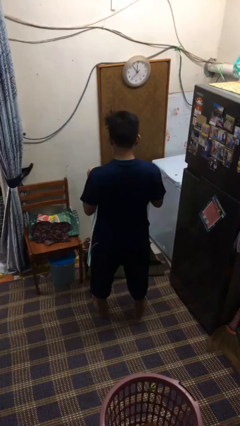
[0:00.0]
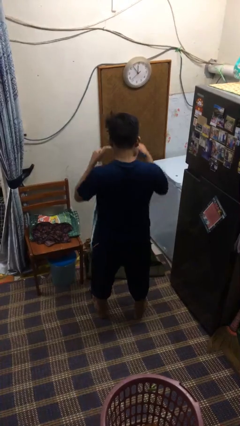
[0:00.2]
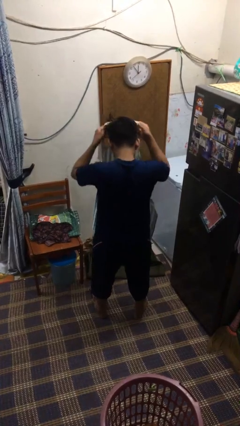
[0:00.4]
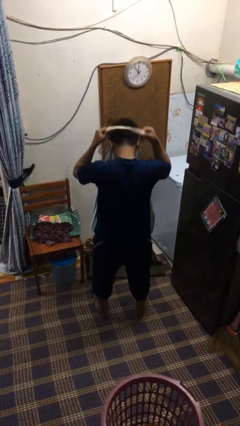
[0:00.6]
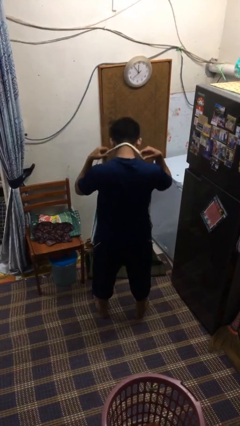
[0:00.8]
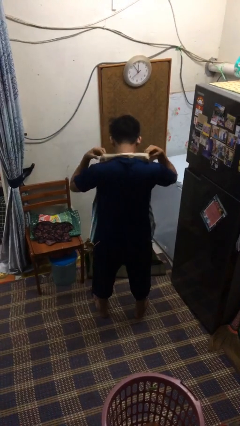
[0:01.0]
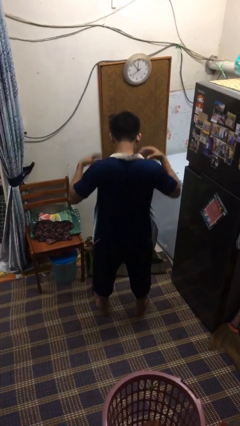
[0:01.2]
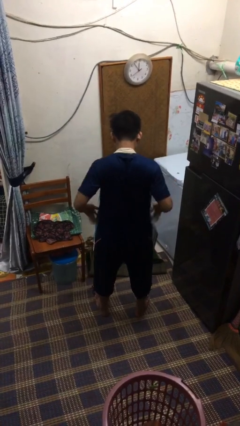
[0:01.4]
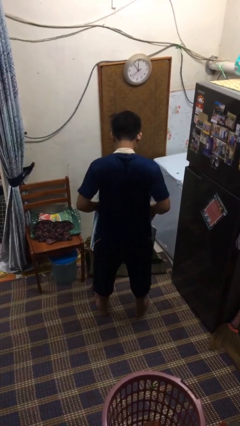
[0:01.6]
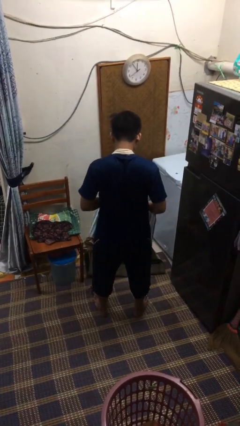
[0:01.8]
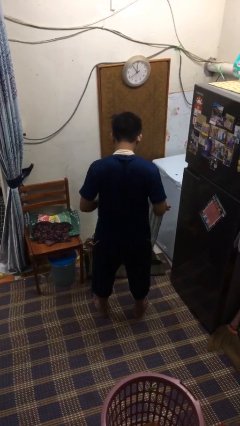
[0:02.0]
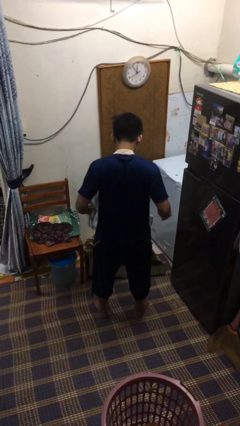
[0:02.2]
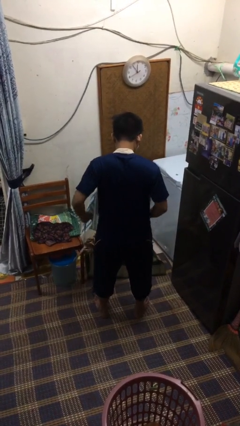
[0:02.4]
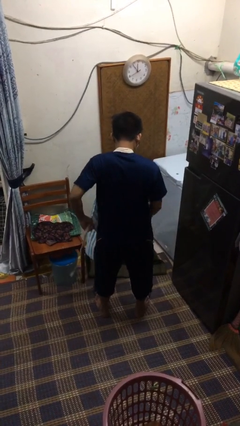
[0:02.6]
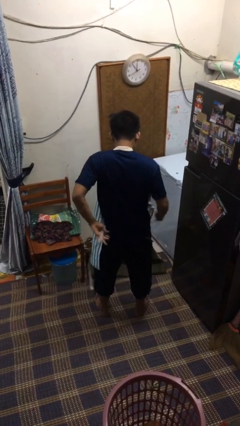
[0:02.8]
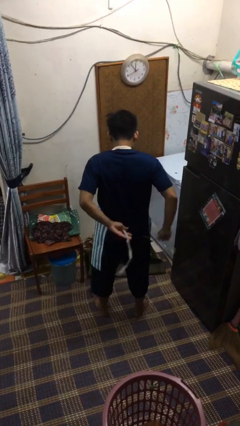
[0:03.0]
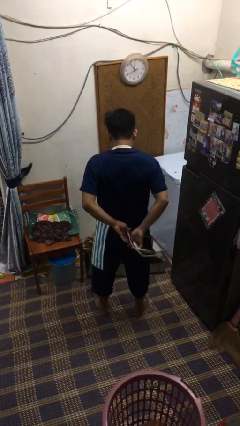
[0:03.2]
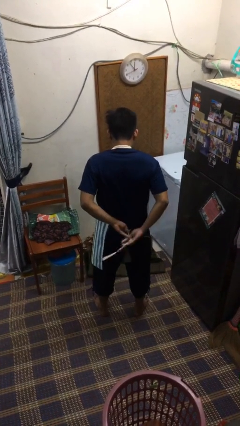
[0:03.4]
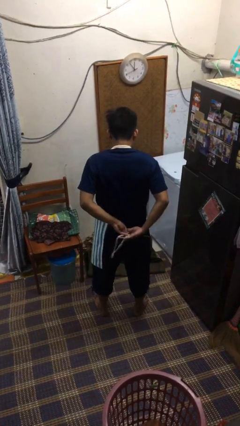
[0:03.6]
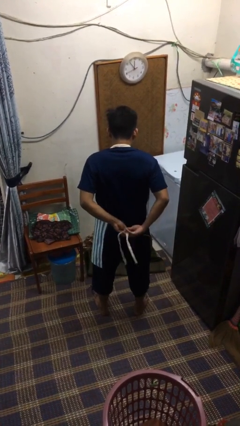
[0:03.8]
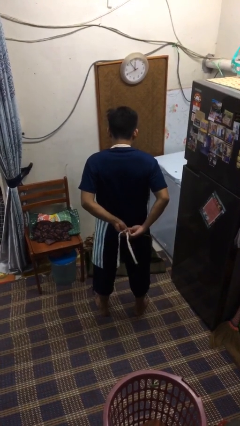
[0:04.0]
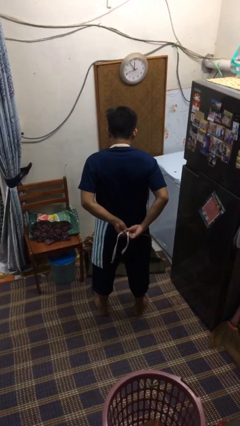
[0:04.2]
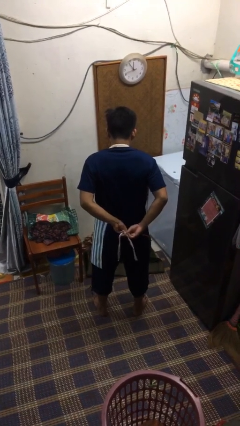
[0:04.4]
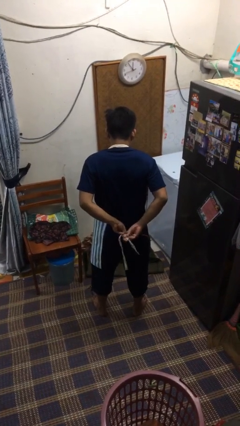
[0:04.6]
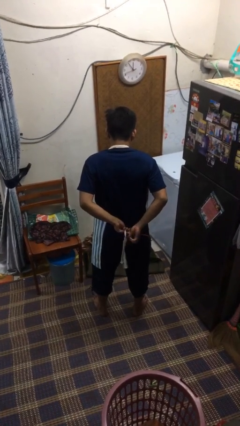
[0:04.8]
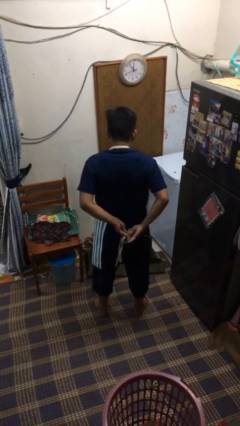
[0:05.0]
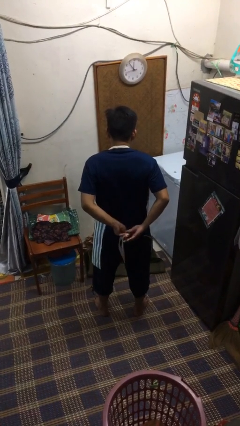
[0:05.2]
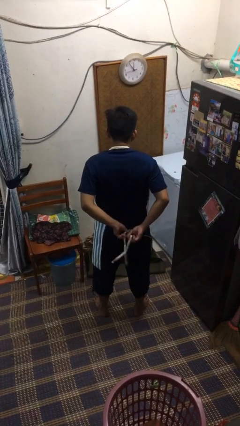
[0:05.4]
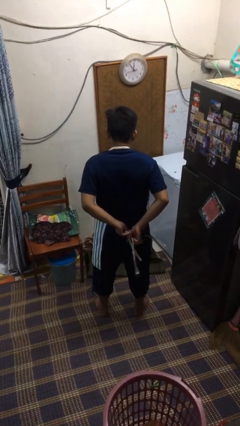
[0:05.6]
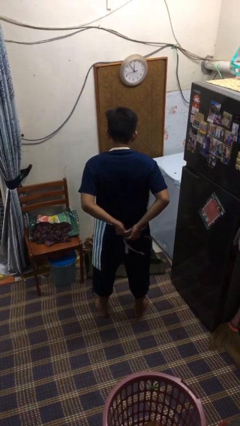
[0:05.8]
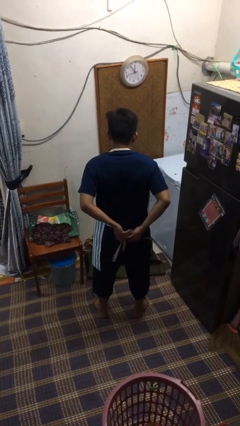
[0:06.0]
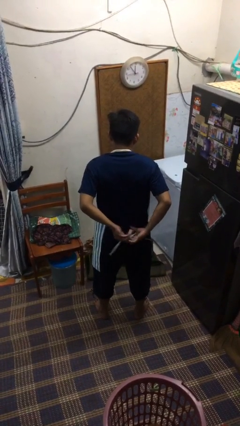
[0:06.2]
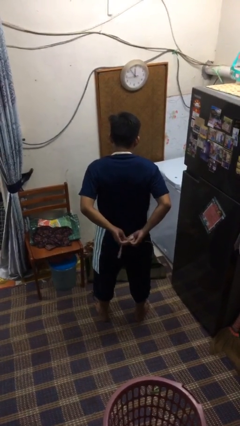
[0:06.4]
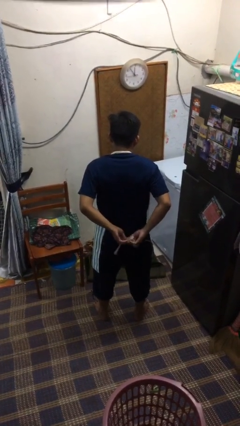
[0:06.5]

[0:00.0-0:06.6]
person puts on apron

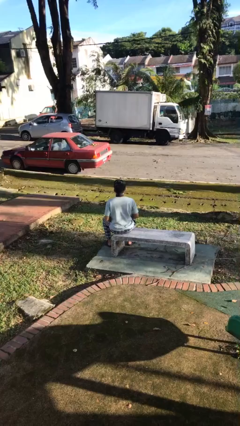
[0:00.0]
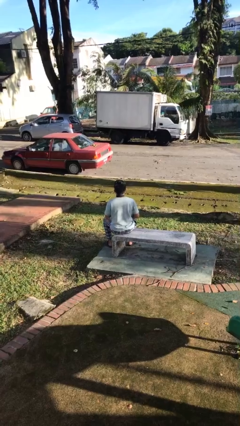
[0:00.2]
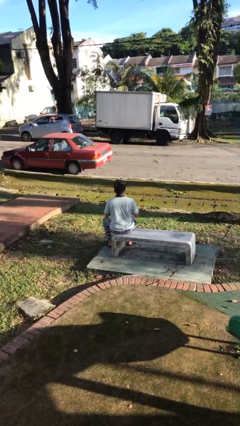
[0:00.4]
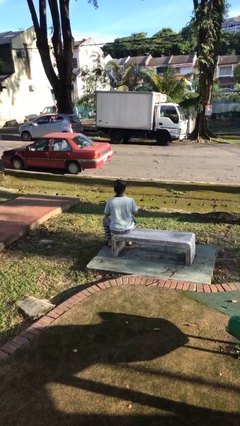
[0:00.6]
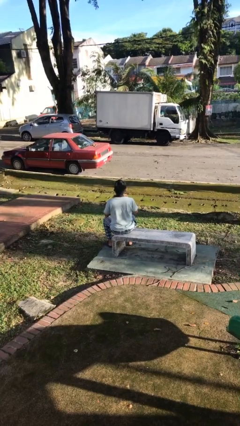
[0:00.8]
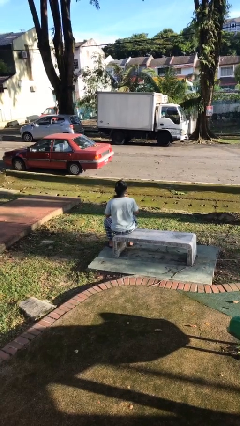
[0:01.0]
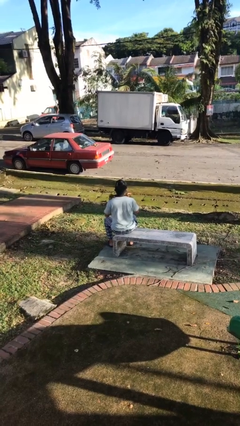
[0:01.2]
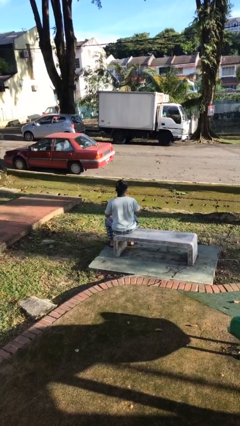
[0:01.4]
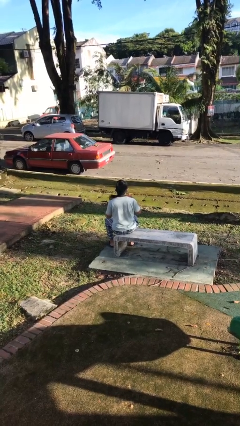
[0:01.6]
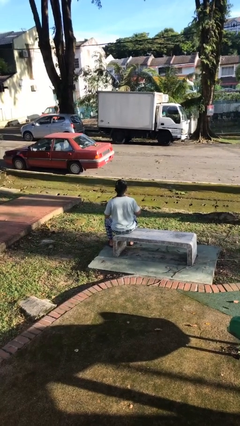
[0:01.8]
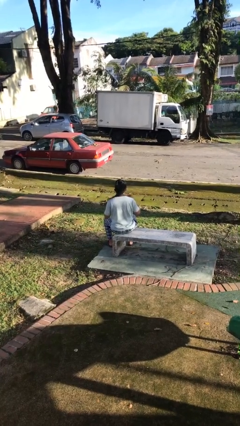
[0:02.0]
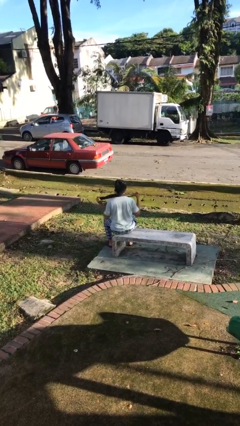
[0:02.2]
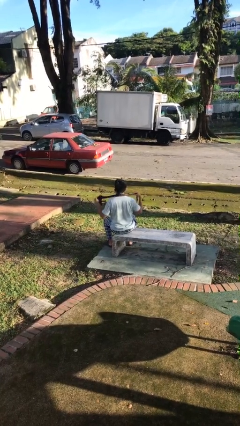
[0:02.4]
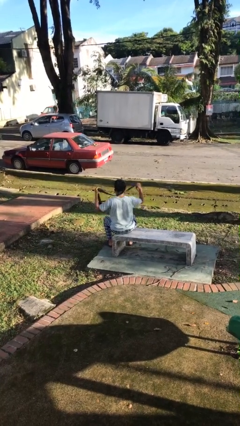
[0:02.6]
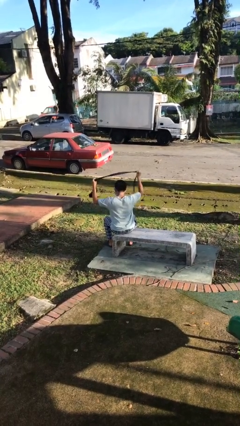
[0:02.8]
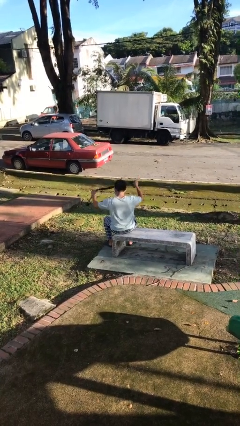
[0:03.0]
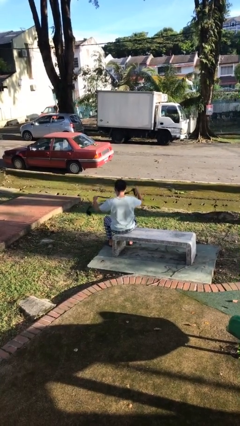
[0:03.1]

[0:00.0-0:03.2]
person takes off necktie

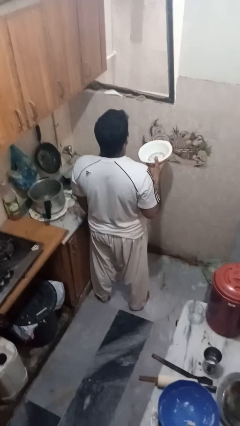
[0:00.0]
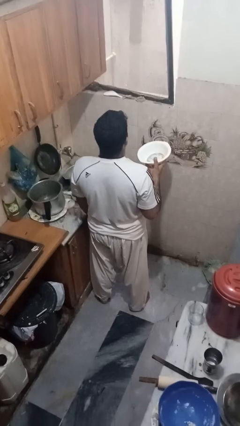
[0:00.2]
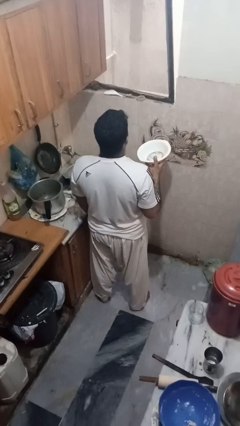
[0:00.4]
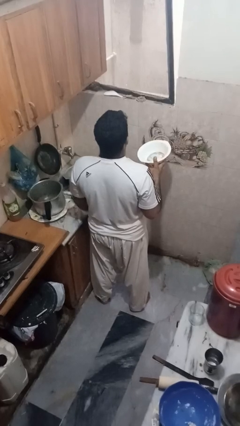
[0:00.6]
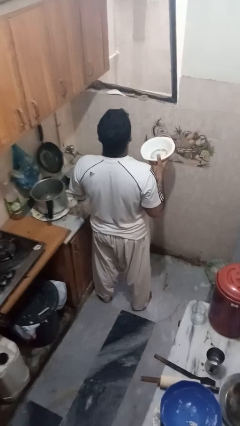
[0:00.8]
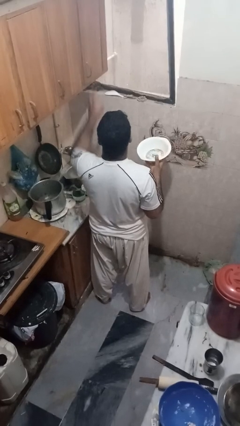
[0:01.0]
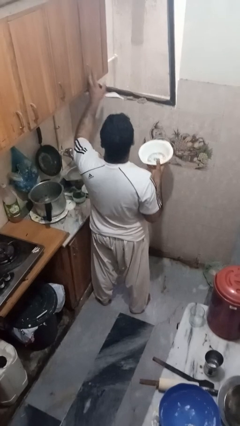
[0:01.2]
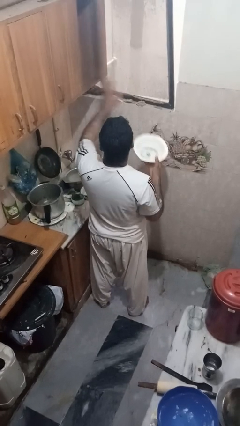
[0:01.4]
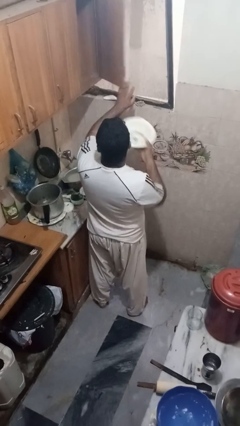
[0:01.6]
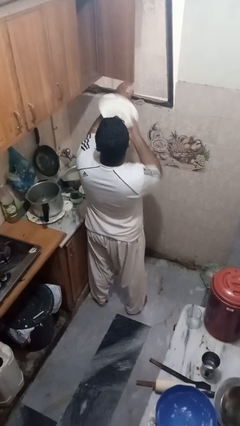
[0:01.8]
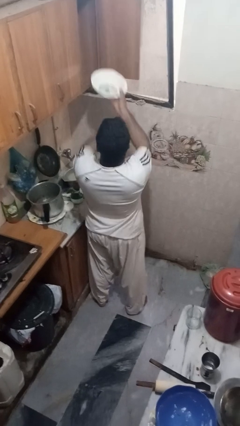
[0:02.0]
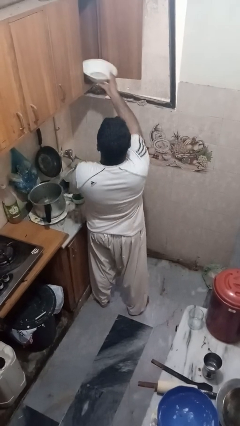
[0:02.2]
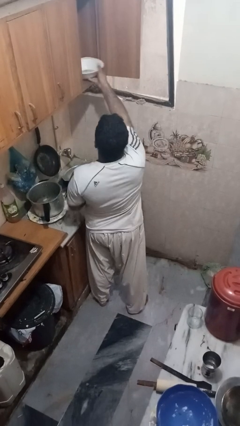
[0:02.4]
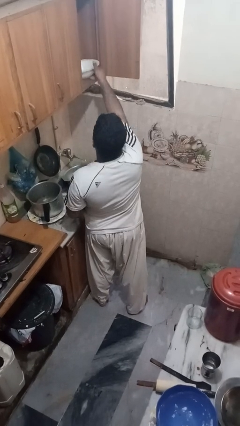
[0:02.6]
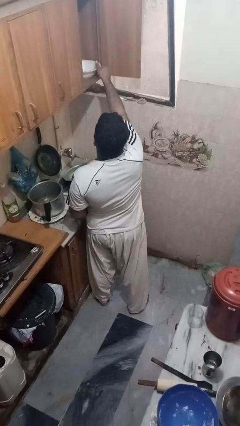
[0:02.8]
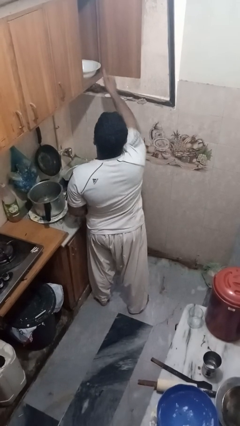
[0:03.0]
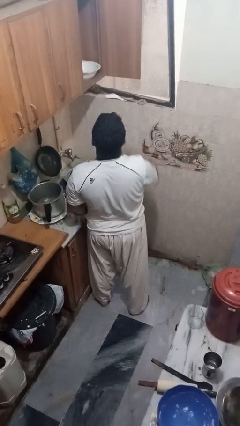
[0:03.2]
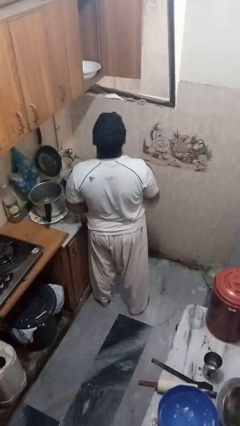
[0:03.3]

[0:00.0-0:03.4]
person puts object in cabinet

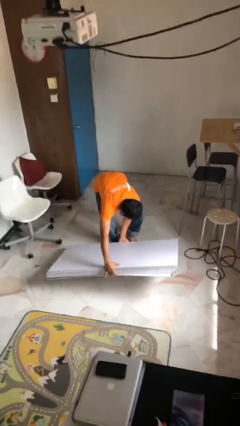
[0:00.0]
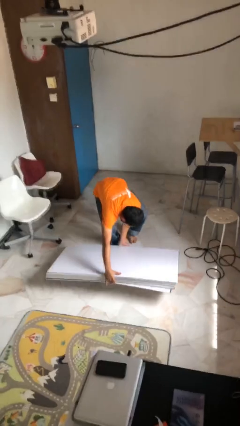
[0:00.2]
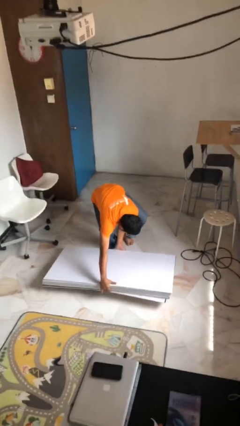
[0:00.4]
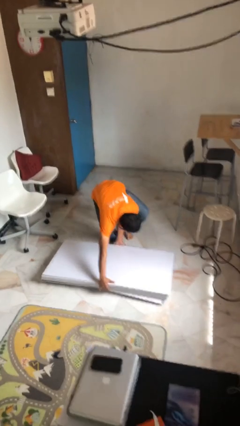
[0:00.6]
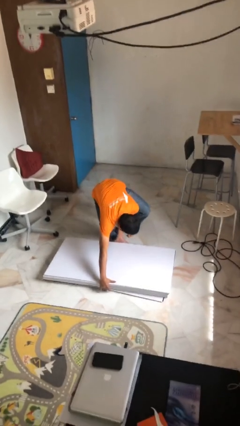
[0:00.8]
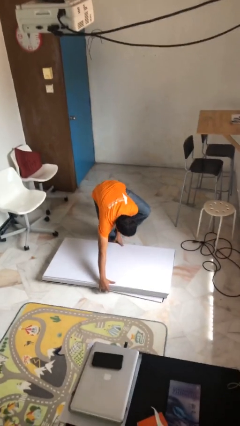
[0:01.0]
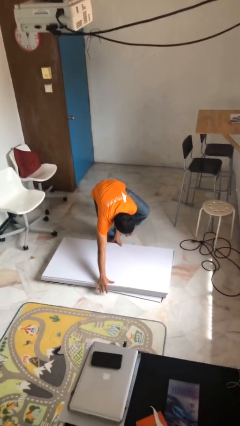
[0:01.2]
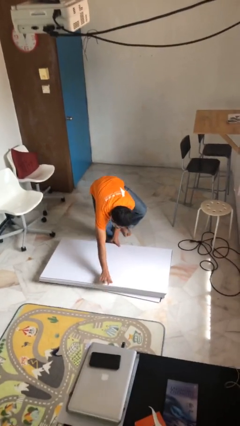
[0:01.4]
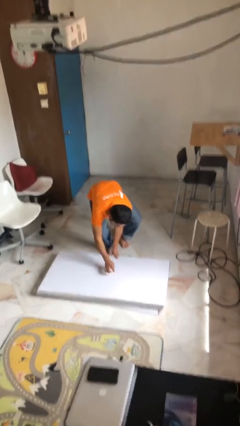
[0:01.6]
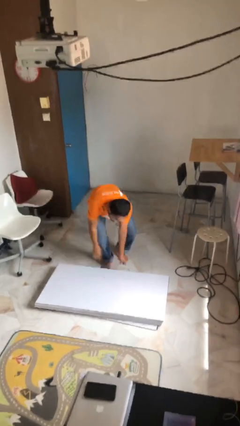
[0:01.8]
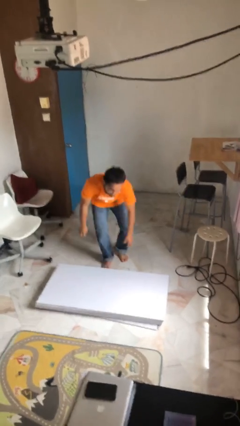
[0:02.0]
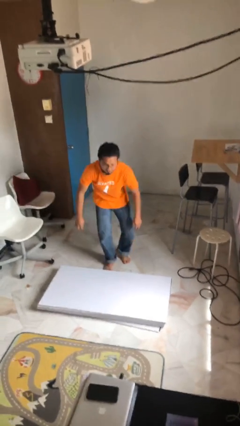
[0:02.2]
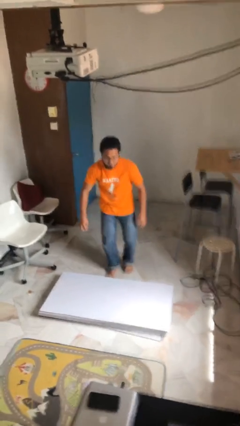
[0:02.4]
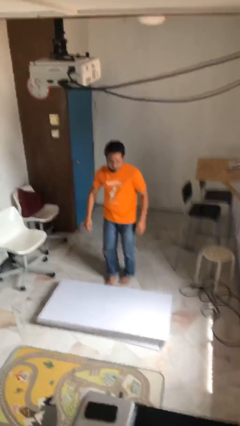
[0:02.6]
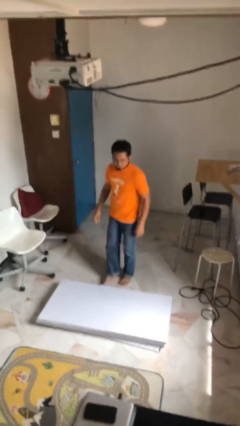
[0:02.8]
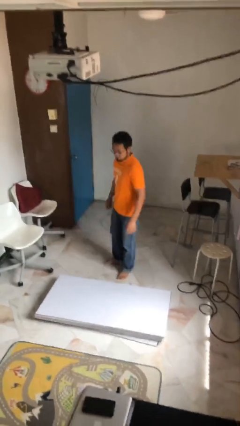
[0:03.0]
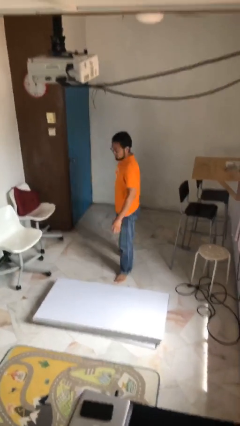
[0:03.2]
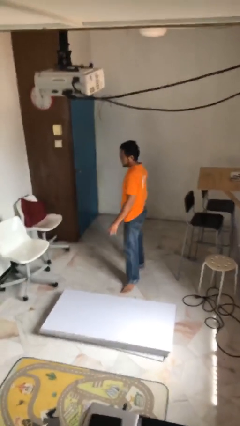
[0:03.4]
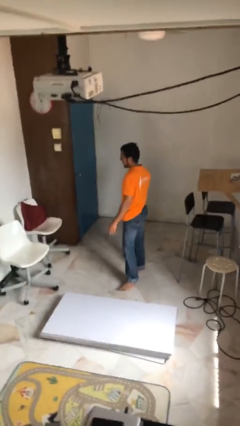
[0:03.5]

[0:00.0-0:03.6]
person puts down object on floor

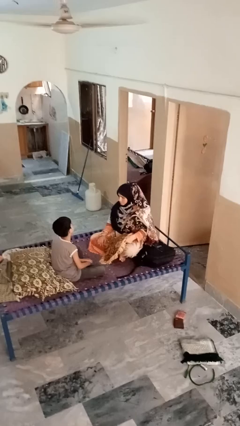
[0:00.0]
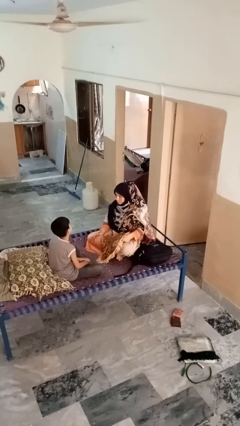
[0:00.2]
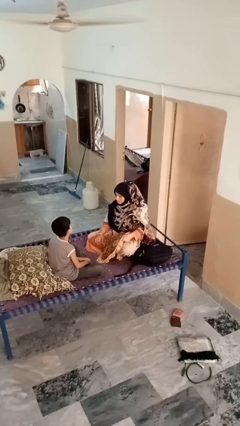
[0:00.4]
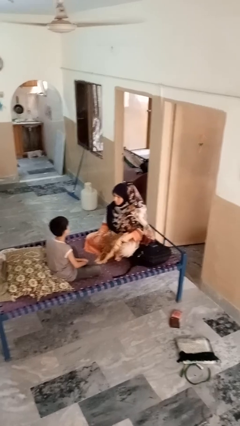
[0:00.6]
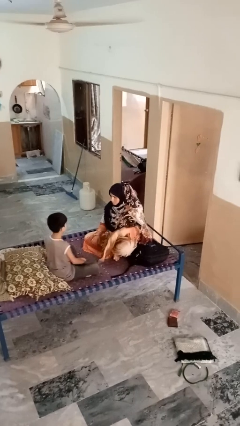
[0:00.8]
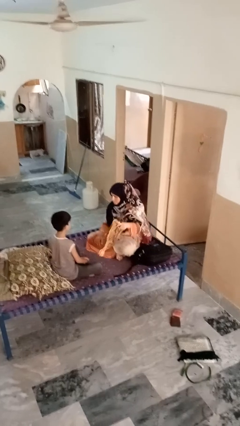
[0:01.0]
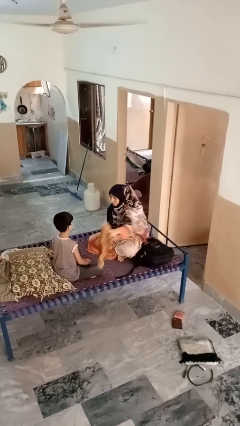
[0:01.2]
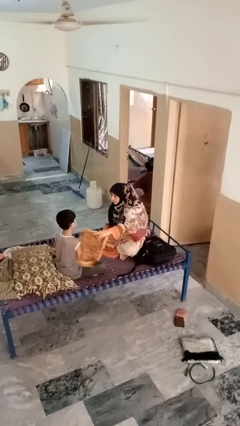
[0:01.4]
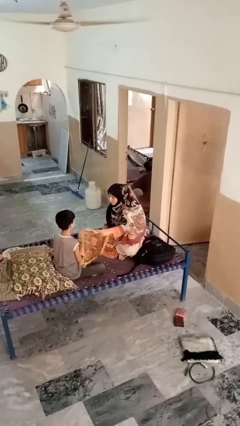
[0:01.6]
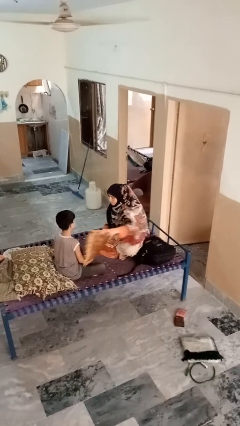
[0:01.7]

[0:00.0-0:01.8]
person hits person with pillow
